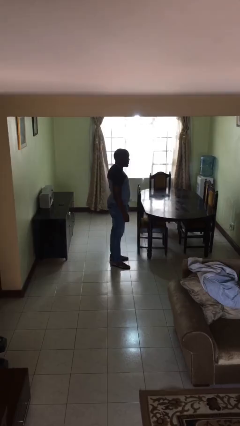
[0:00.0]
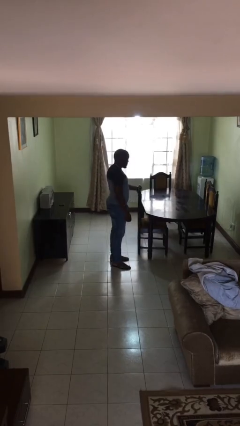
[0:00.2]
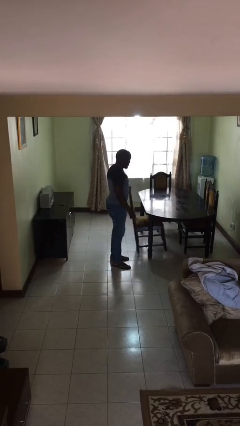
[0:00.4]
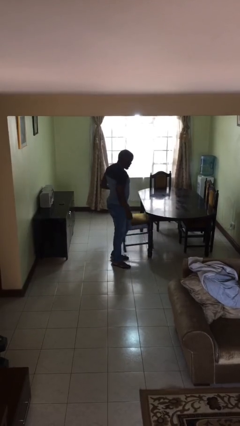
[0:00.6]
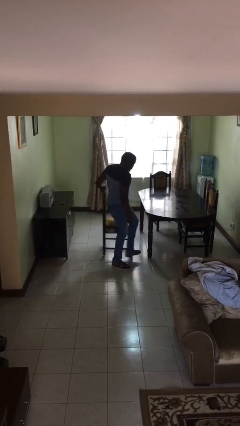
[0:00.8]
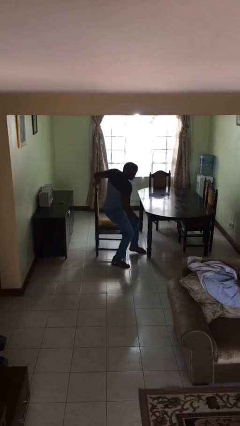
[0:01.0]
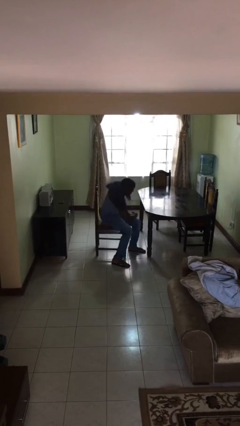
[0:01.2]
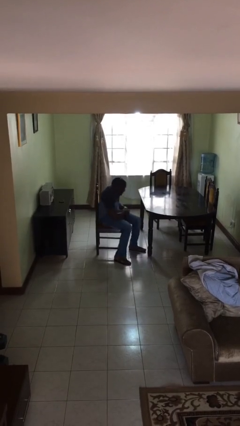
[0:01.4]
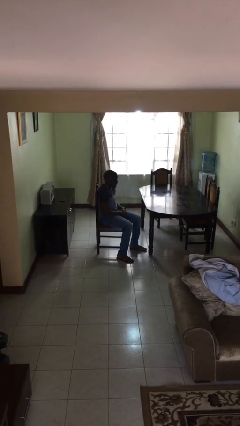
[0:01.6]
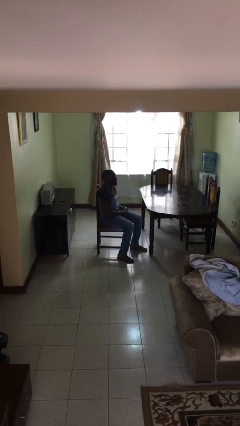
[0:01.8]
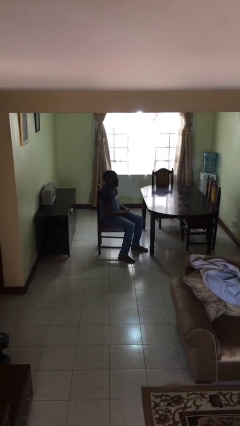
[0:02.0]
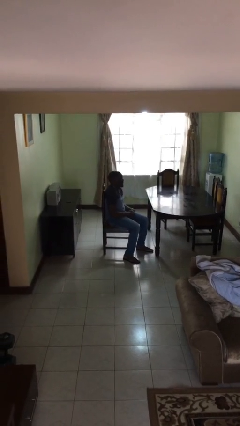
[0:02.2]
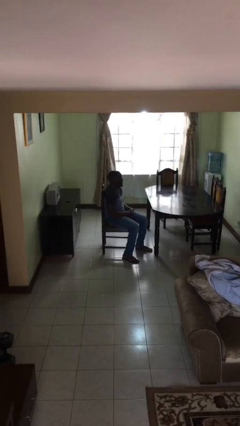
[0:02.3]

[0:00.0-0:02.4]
person sits down

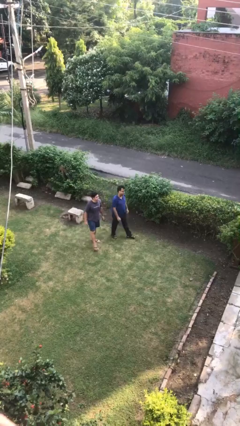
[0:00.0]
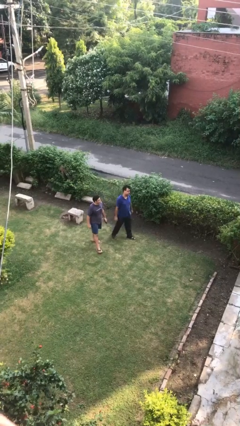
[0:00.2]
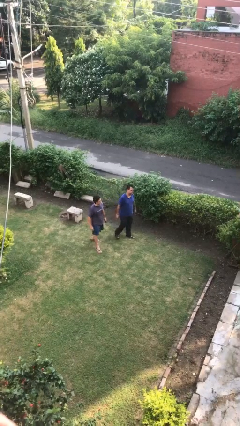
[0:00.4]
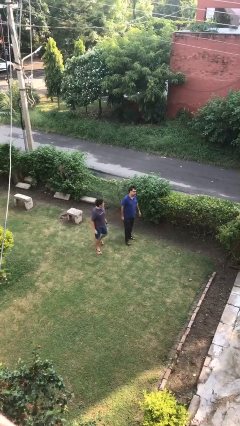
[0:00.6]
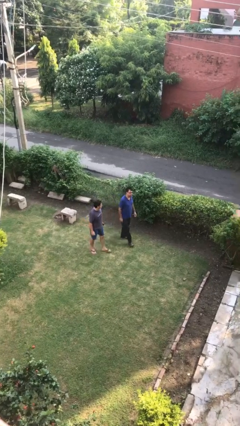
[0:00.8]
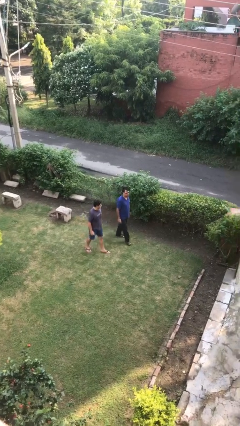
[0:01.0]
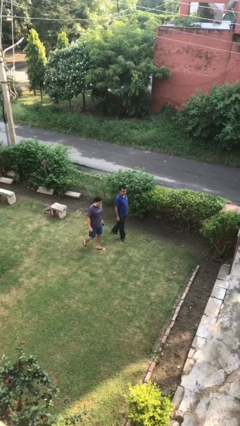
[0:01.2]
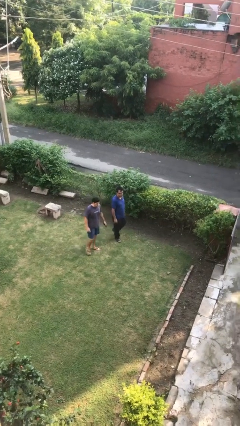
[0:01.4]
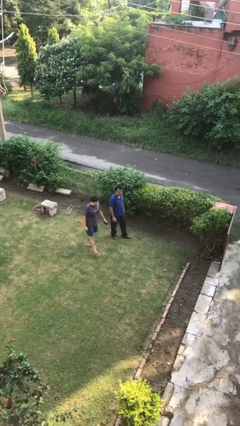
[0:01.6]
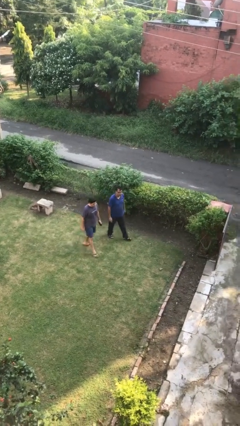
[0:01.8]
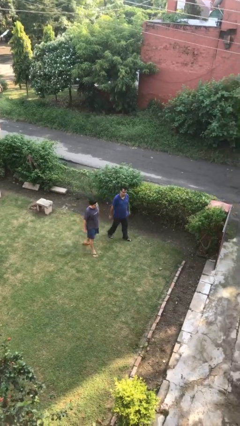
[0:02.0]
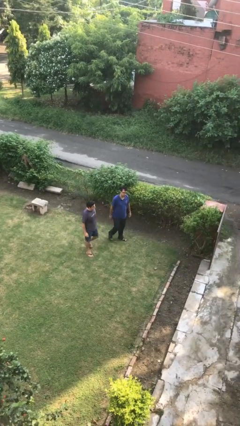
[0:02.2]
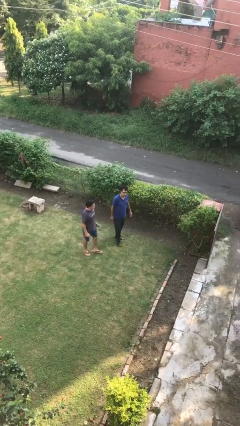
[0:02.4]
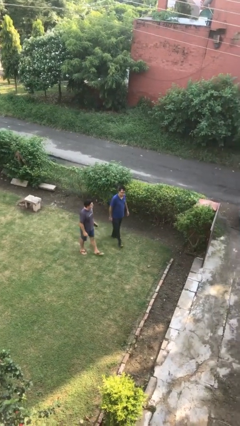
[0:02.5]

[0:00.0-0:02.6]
person talks to person

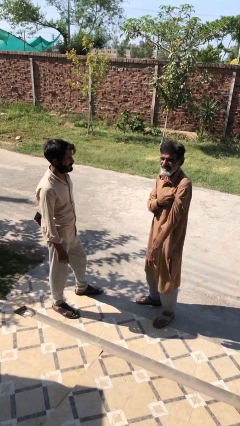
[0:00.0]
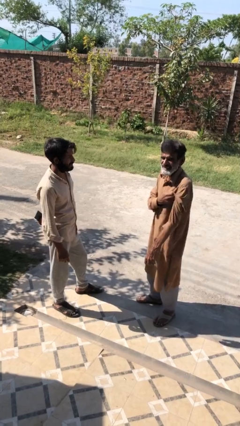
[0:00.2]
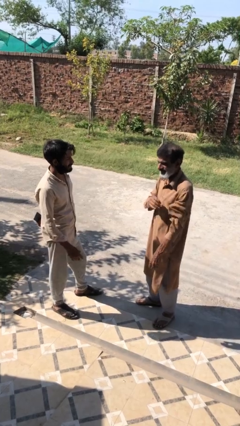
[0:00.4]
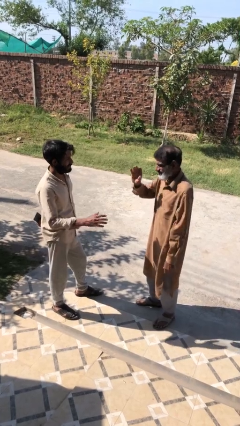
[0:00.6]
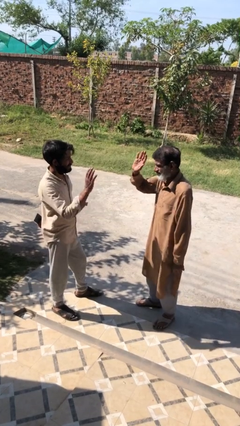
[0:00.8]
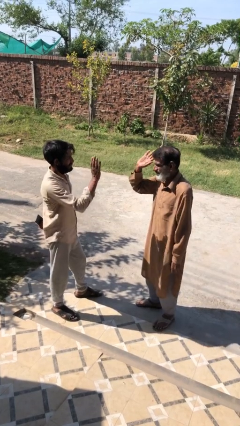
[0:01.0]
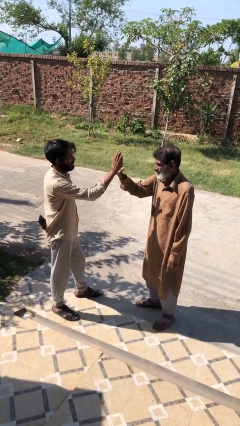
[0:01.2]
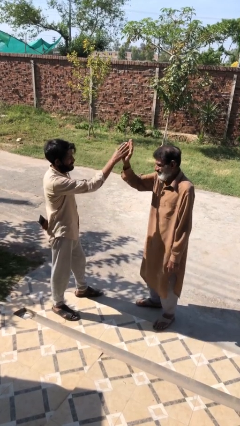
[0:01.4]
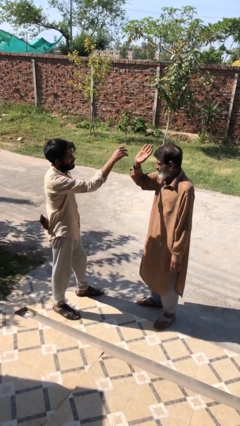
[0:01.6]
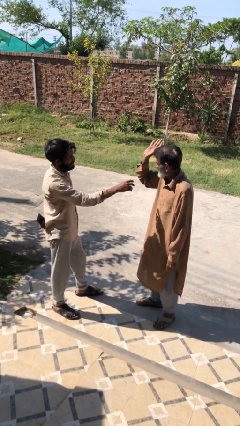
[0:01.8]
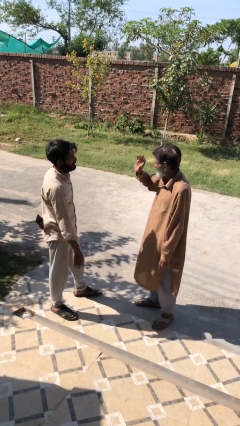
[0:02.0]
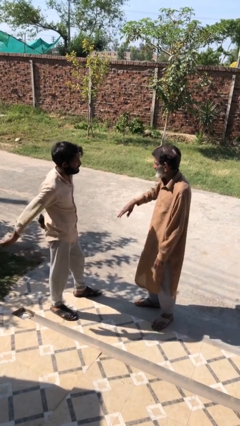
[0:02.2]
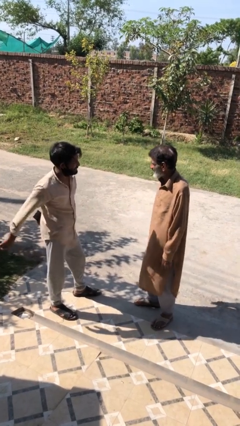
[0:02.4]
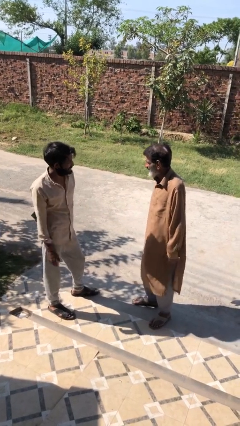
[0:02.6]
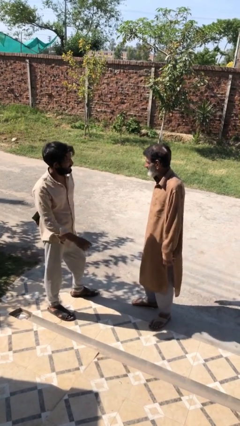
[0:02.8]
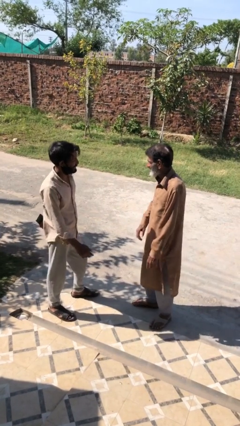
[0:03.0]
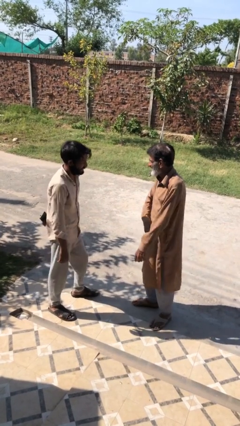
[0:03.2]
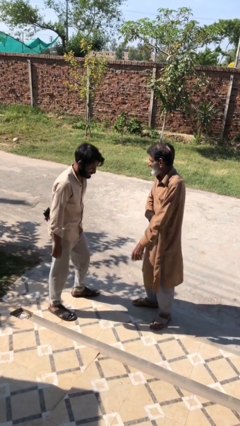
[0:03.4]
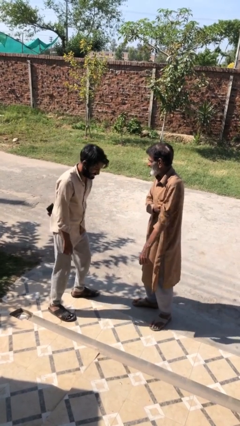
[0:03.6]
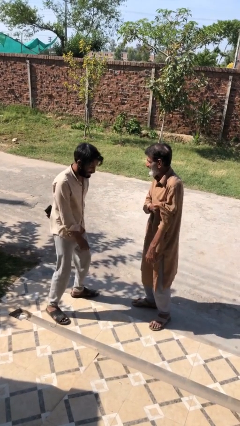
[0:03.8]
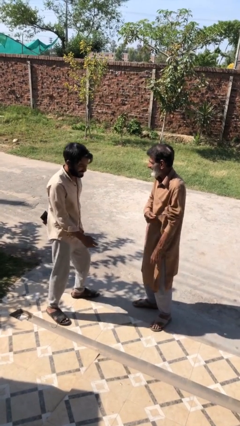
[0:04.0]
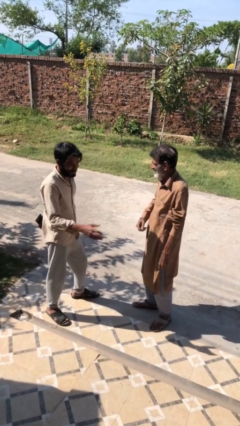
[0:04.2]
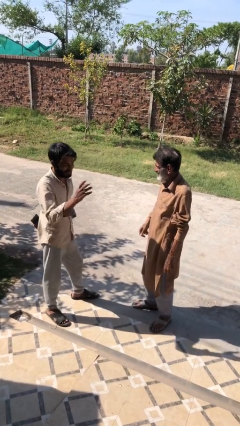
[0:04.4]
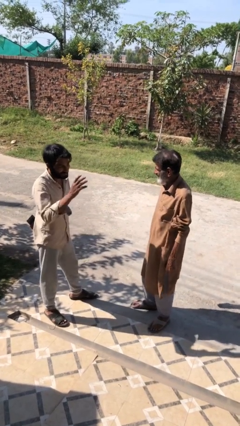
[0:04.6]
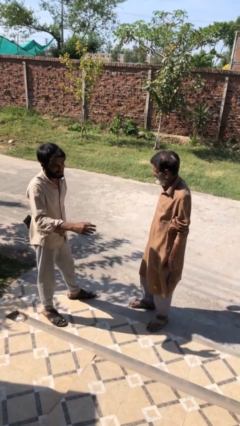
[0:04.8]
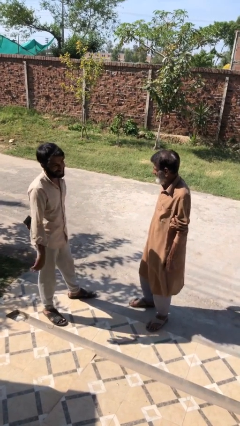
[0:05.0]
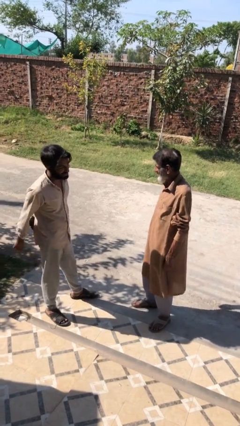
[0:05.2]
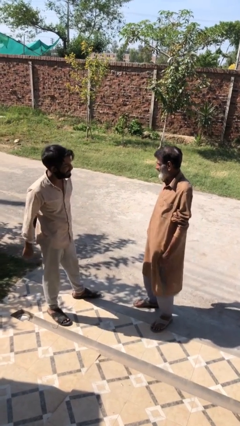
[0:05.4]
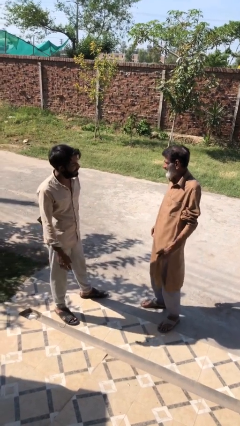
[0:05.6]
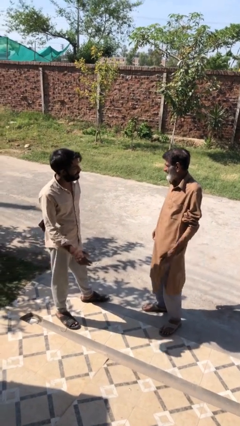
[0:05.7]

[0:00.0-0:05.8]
person highfives hand

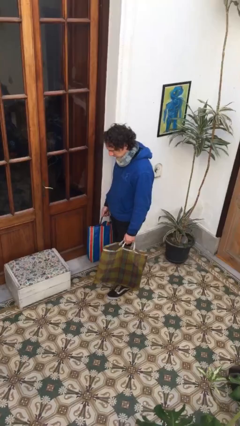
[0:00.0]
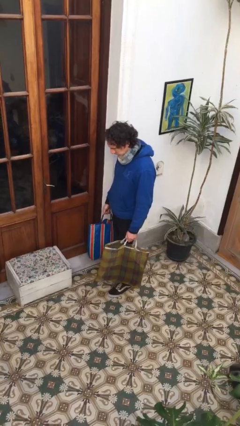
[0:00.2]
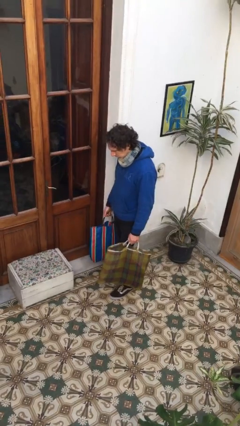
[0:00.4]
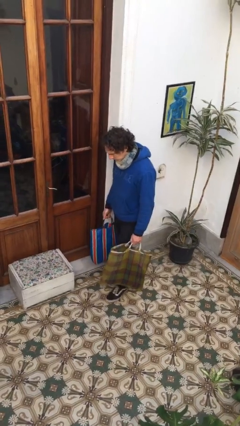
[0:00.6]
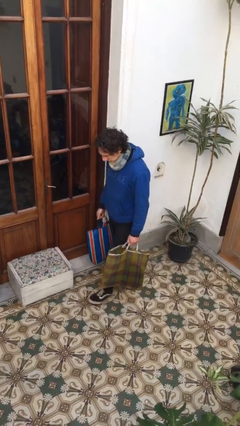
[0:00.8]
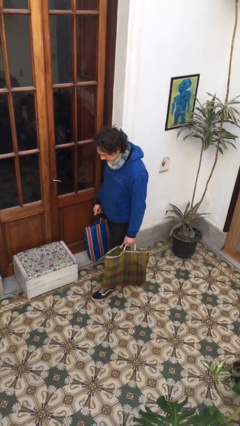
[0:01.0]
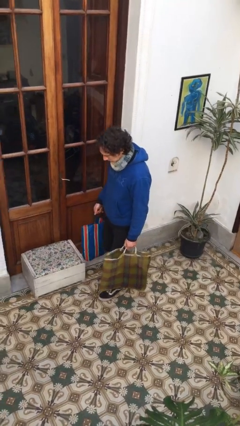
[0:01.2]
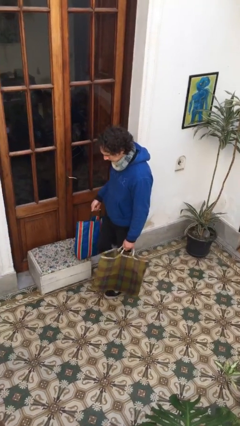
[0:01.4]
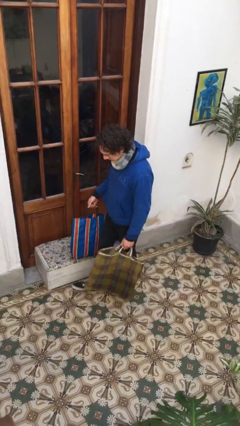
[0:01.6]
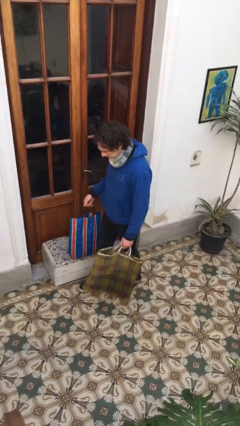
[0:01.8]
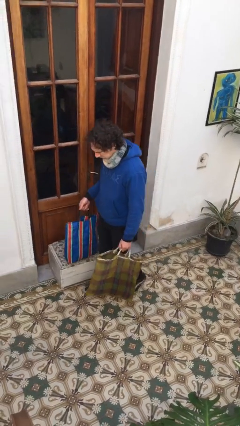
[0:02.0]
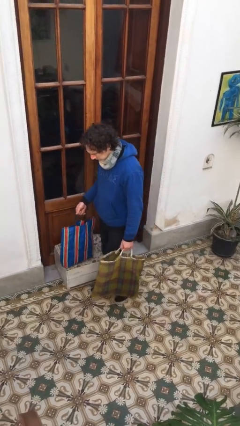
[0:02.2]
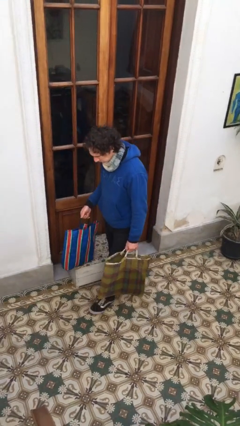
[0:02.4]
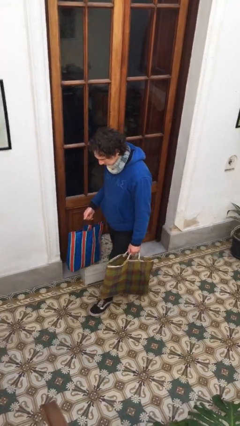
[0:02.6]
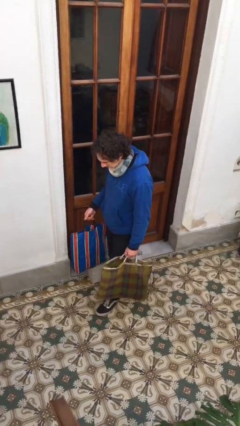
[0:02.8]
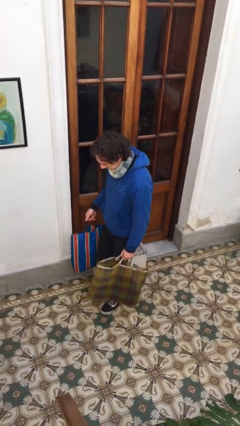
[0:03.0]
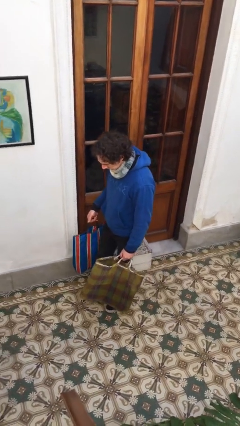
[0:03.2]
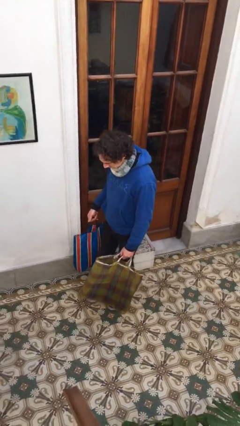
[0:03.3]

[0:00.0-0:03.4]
person carries groceries

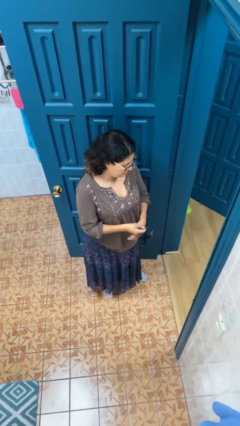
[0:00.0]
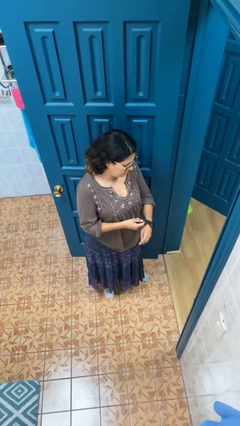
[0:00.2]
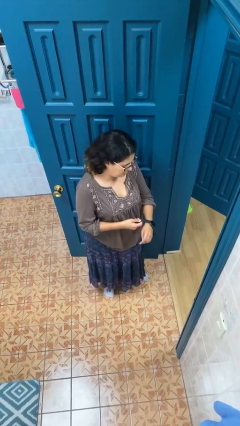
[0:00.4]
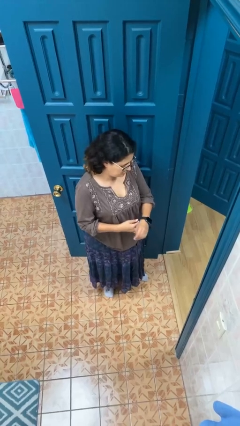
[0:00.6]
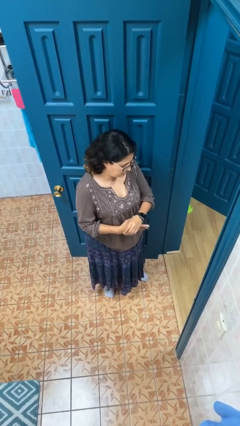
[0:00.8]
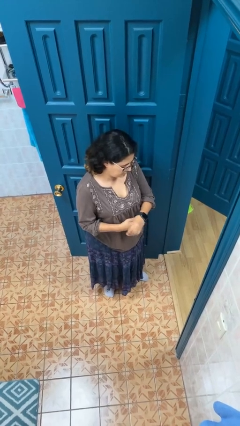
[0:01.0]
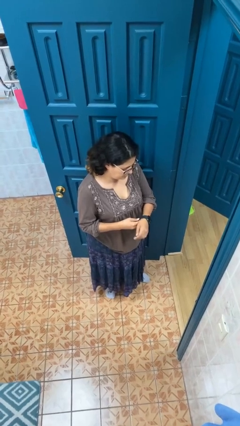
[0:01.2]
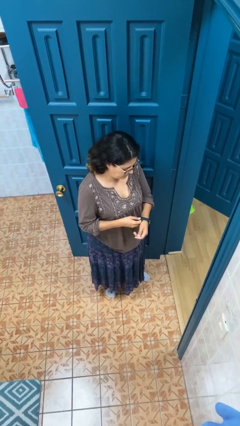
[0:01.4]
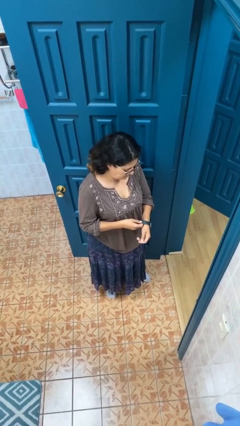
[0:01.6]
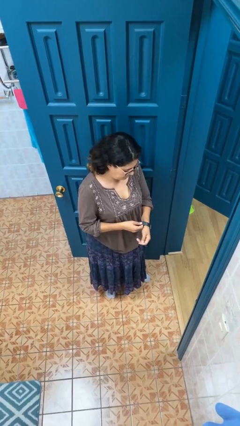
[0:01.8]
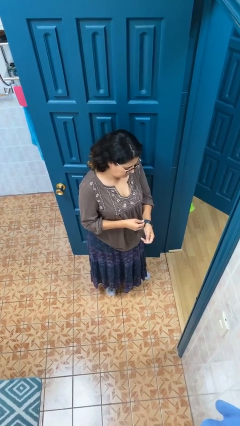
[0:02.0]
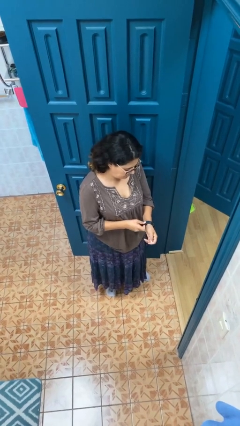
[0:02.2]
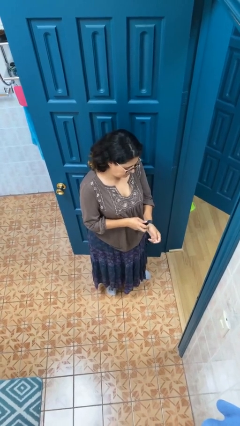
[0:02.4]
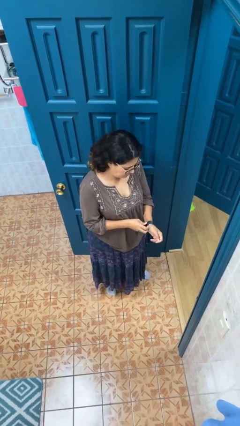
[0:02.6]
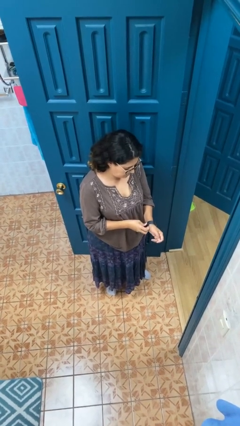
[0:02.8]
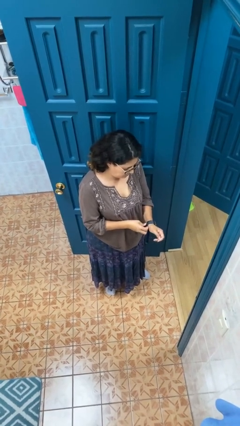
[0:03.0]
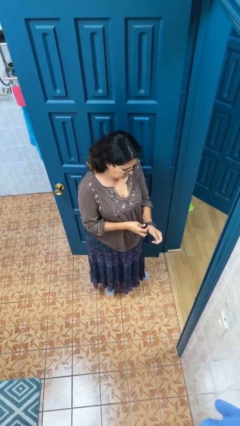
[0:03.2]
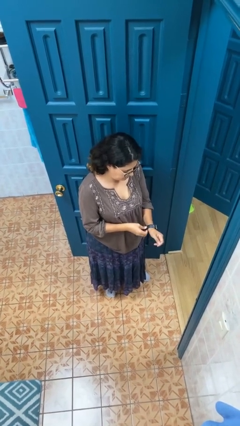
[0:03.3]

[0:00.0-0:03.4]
person puts on wristwatch
